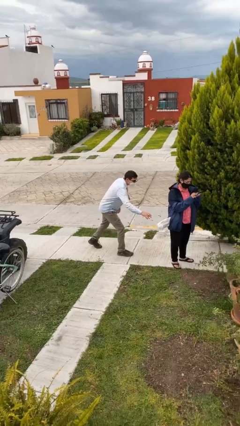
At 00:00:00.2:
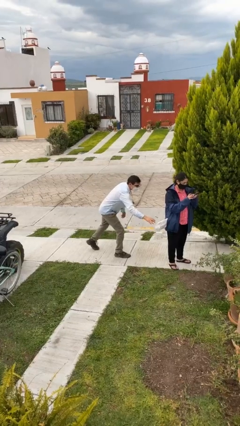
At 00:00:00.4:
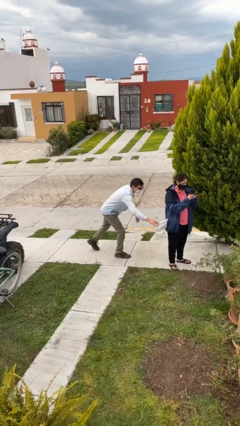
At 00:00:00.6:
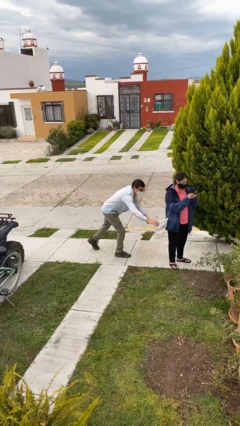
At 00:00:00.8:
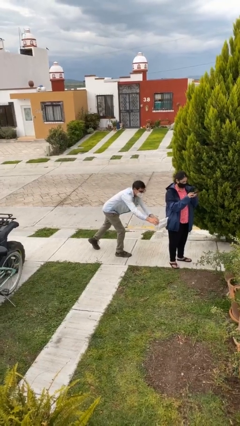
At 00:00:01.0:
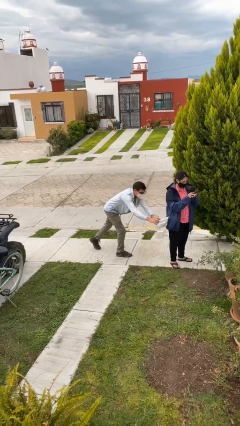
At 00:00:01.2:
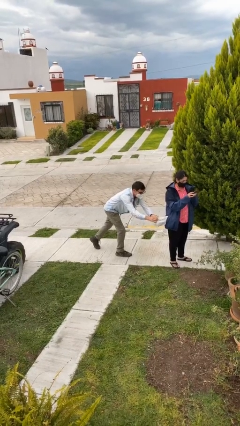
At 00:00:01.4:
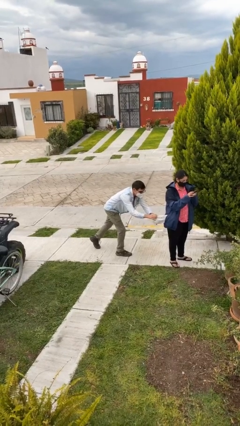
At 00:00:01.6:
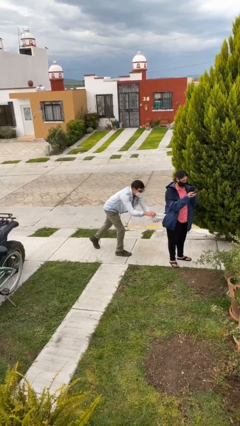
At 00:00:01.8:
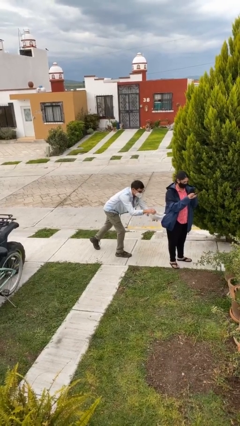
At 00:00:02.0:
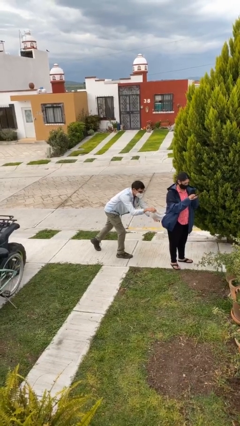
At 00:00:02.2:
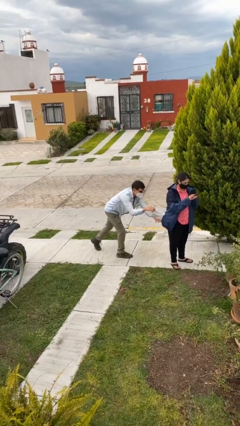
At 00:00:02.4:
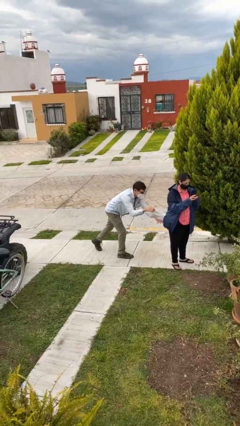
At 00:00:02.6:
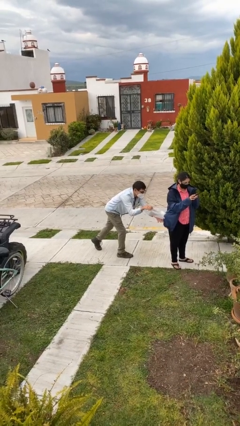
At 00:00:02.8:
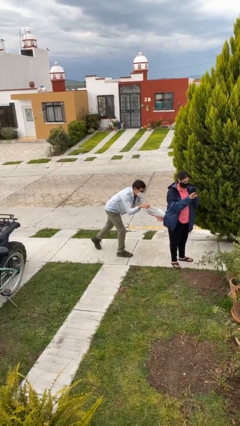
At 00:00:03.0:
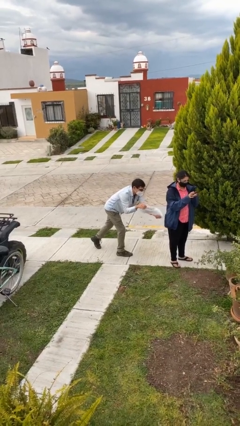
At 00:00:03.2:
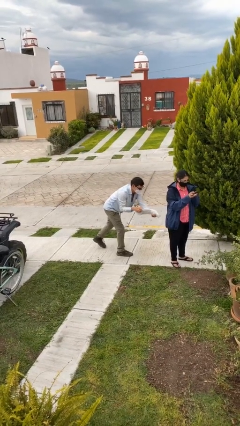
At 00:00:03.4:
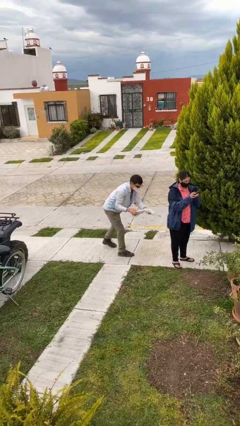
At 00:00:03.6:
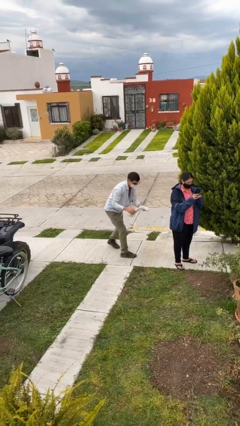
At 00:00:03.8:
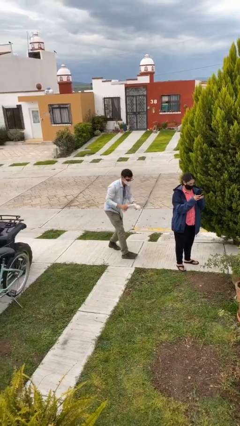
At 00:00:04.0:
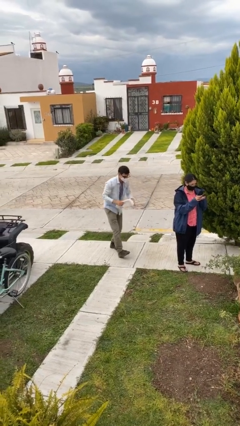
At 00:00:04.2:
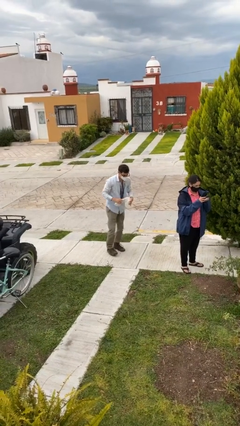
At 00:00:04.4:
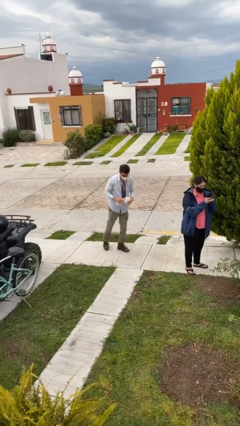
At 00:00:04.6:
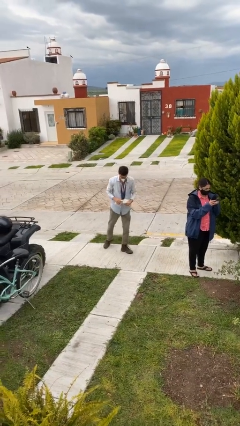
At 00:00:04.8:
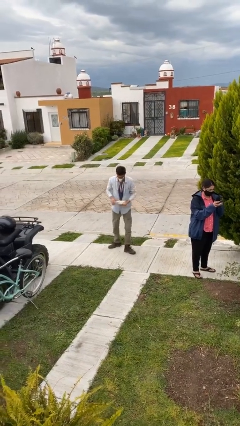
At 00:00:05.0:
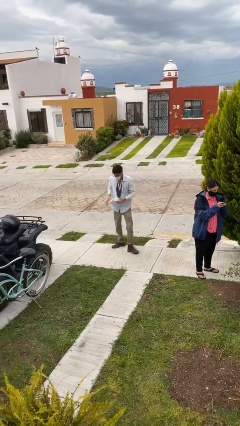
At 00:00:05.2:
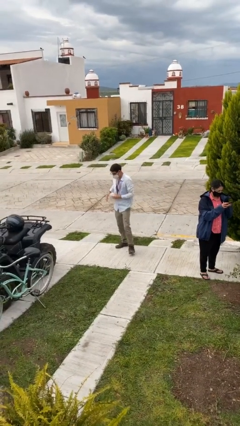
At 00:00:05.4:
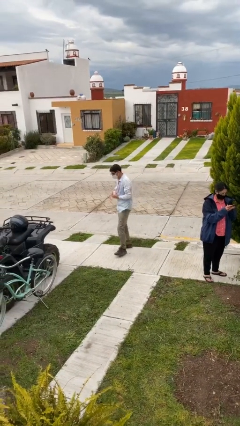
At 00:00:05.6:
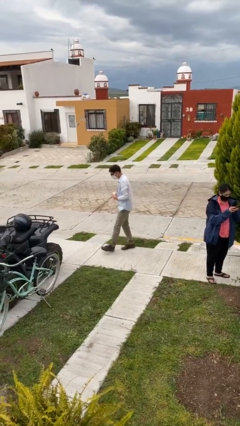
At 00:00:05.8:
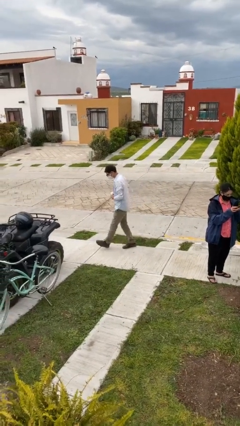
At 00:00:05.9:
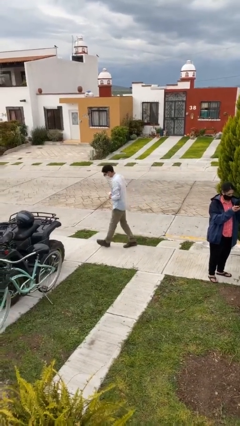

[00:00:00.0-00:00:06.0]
person steals object from person

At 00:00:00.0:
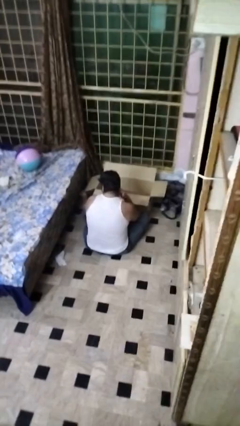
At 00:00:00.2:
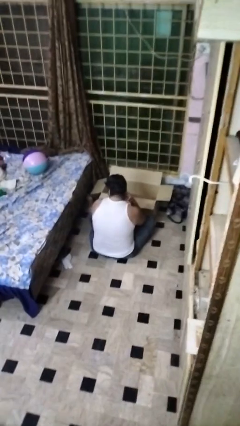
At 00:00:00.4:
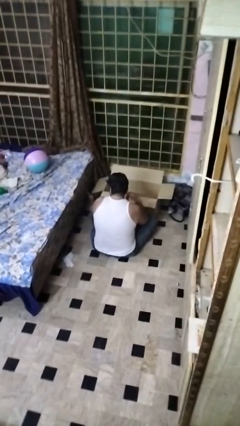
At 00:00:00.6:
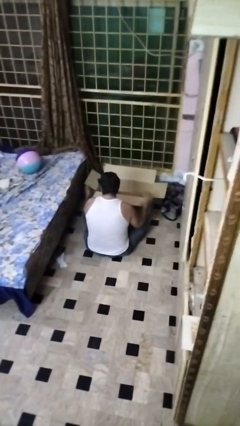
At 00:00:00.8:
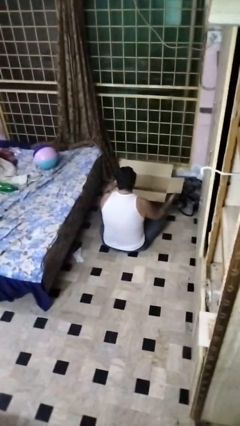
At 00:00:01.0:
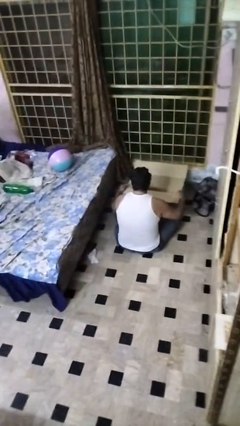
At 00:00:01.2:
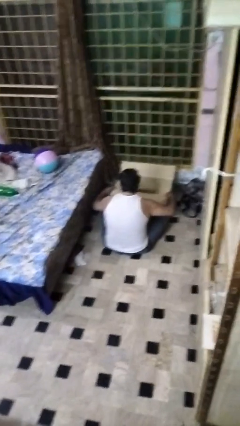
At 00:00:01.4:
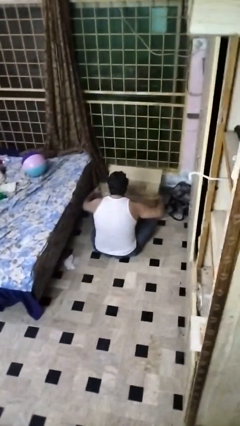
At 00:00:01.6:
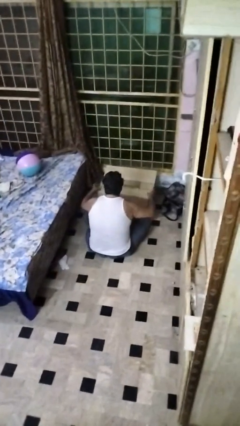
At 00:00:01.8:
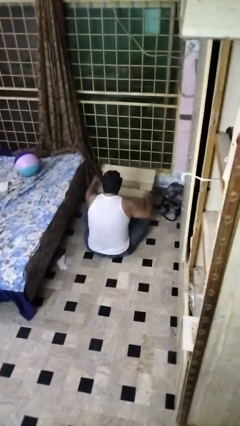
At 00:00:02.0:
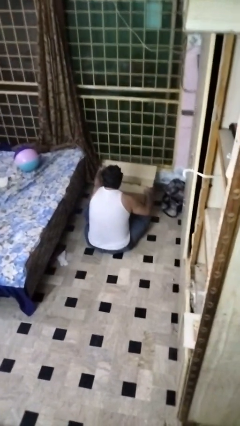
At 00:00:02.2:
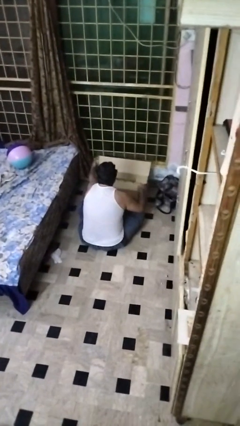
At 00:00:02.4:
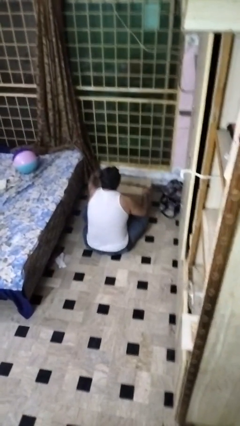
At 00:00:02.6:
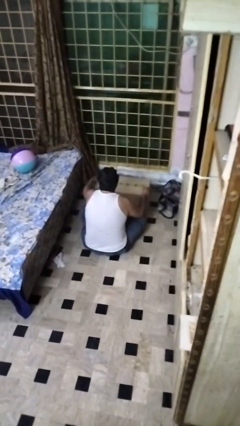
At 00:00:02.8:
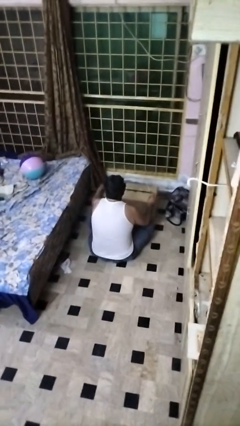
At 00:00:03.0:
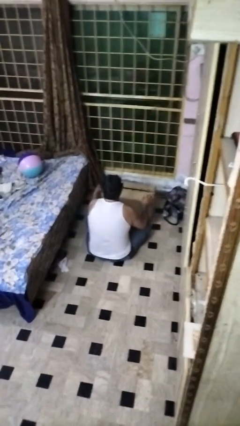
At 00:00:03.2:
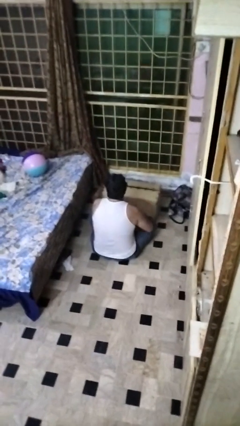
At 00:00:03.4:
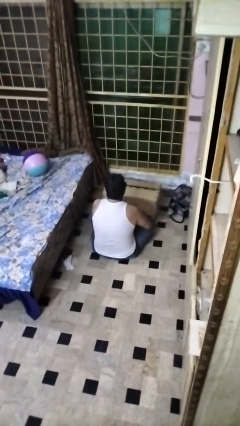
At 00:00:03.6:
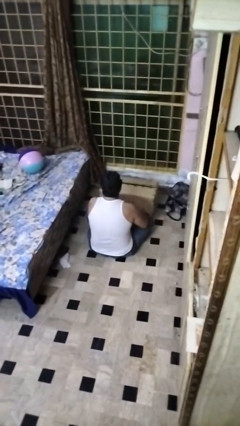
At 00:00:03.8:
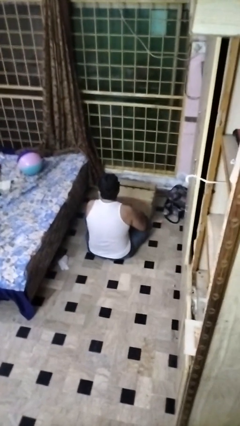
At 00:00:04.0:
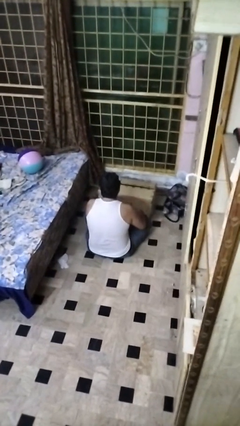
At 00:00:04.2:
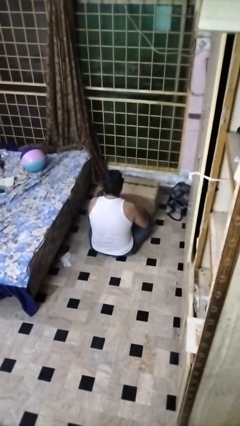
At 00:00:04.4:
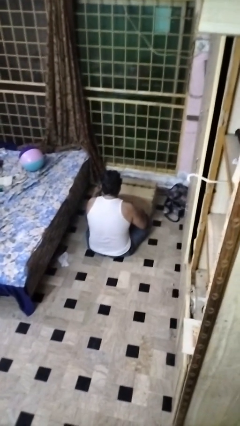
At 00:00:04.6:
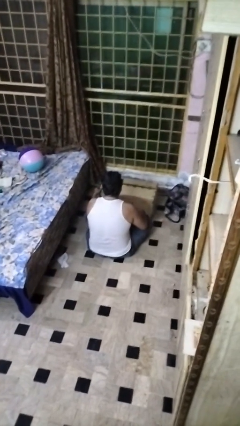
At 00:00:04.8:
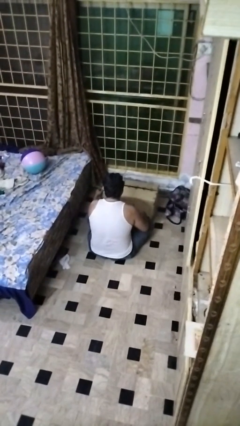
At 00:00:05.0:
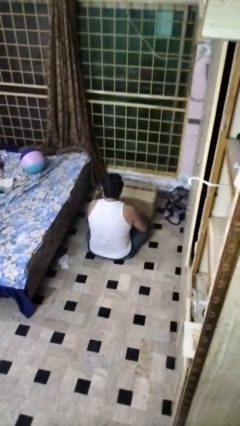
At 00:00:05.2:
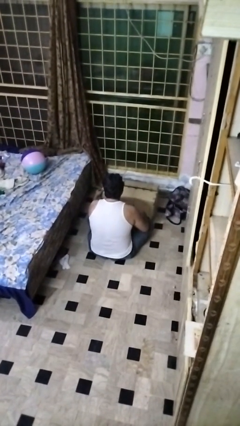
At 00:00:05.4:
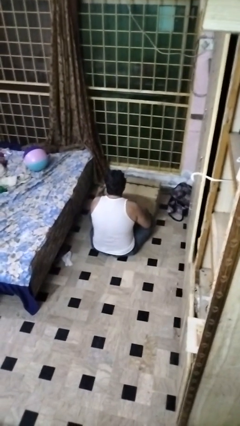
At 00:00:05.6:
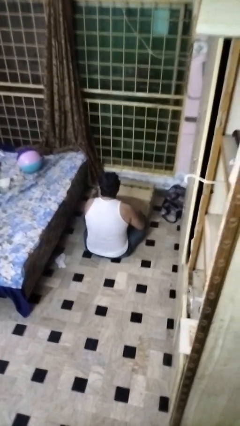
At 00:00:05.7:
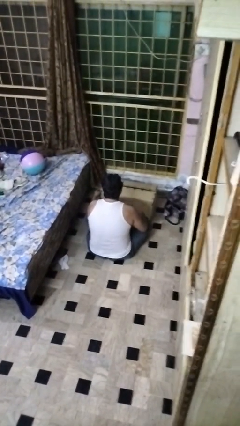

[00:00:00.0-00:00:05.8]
person closes box

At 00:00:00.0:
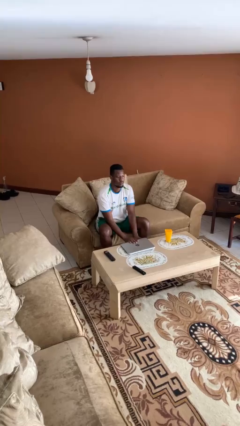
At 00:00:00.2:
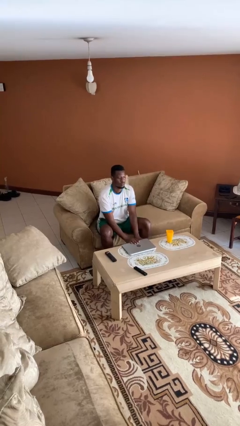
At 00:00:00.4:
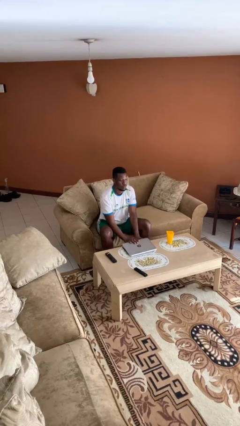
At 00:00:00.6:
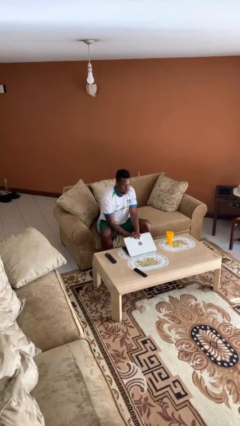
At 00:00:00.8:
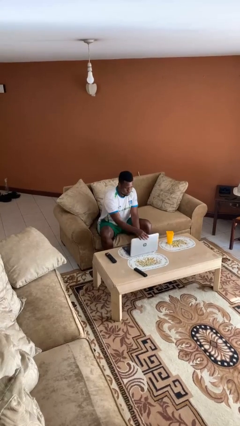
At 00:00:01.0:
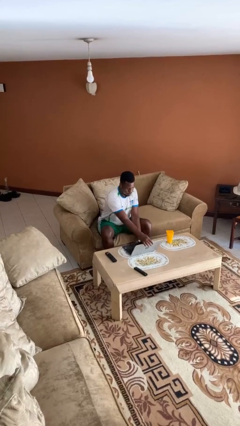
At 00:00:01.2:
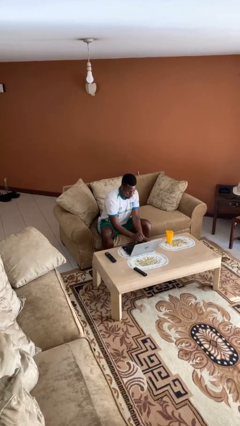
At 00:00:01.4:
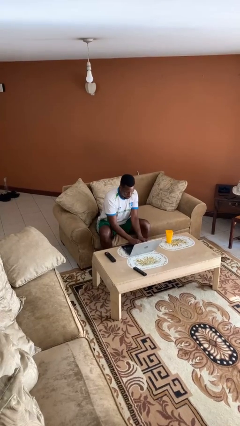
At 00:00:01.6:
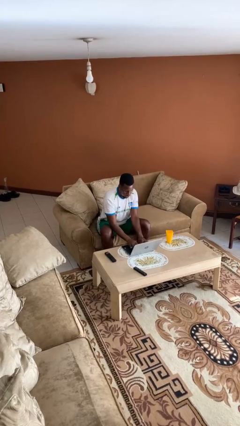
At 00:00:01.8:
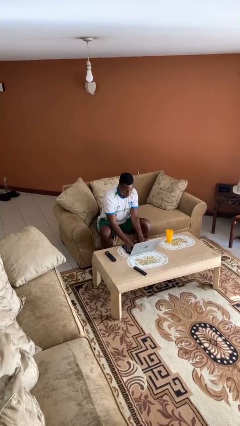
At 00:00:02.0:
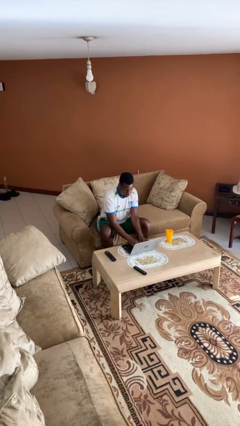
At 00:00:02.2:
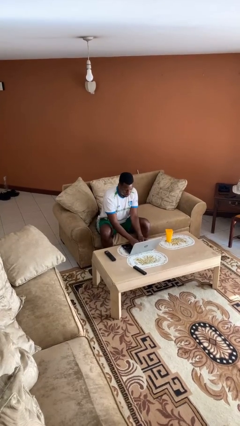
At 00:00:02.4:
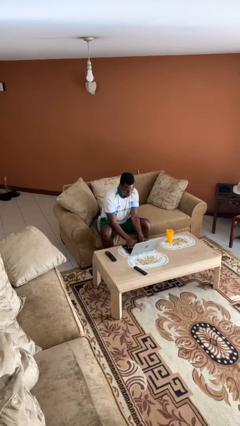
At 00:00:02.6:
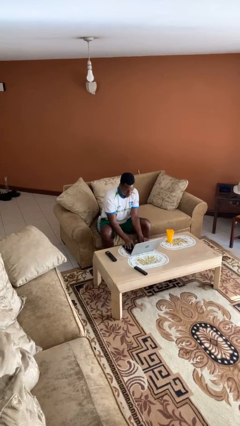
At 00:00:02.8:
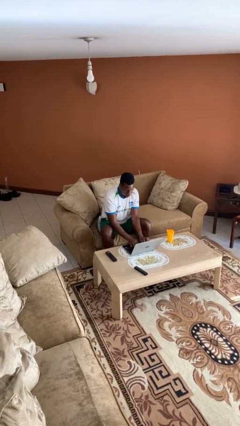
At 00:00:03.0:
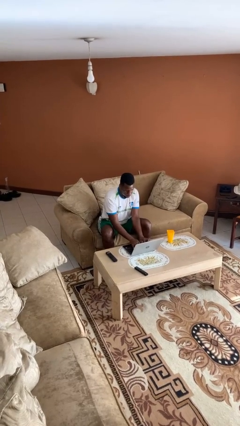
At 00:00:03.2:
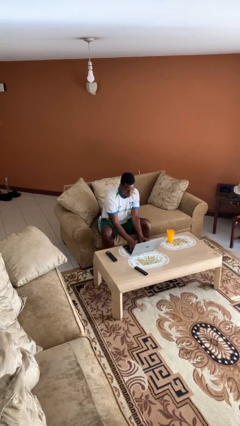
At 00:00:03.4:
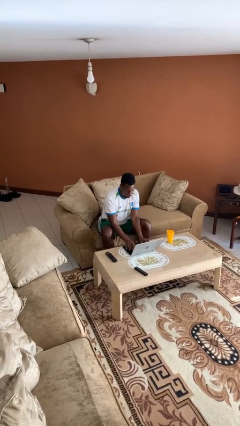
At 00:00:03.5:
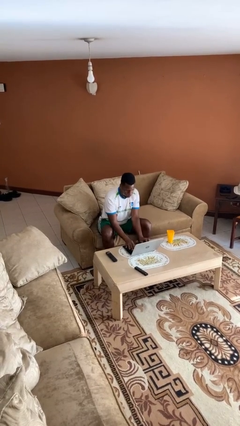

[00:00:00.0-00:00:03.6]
person interacts with laptop

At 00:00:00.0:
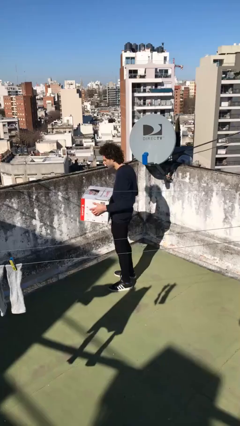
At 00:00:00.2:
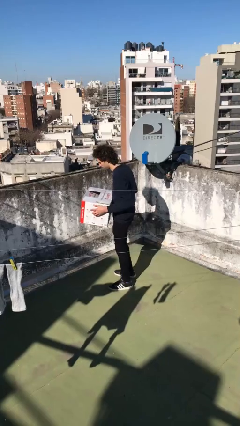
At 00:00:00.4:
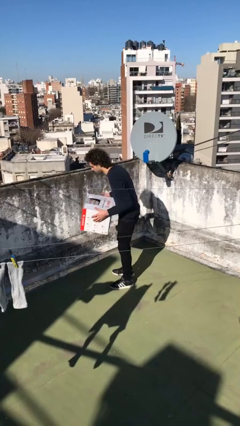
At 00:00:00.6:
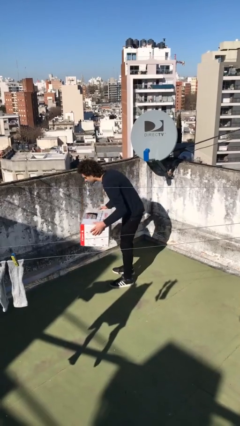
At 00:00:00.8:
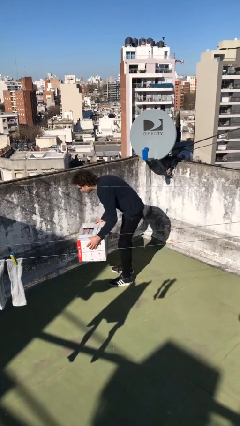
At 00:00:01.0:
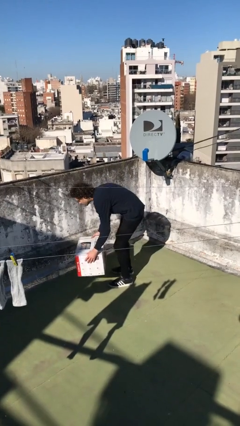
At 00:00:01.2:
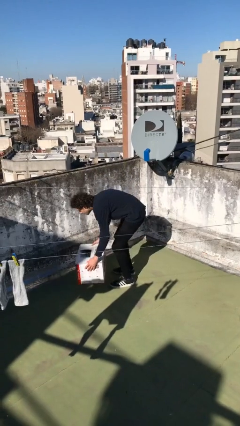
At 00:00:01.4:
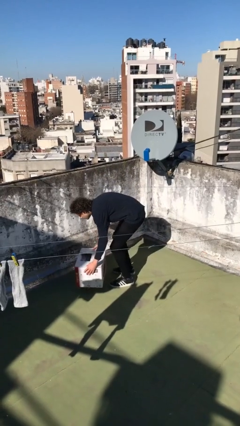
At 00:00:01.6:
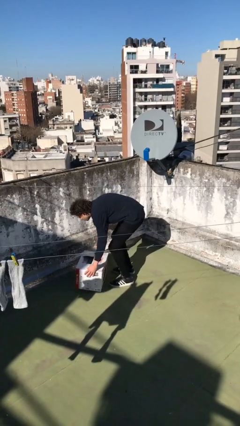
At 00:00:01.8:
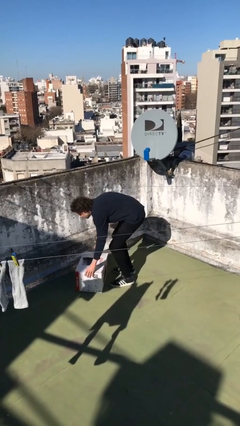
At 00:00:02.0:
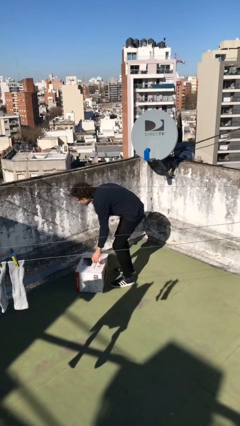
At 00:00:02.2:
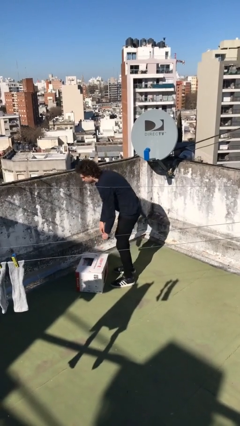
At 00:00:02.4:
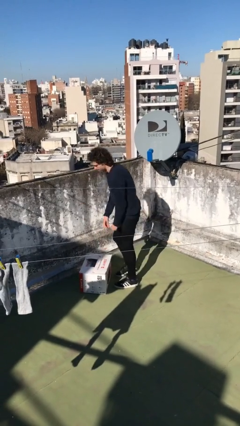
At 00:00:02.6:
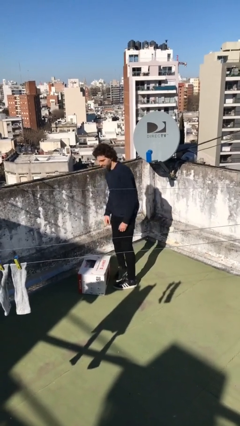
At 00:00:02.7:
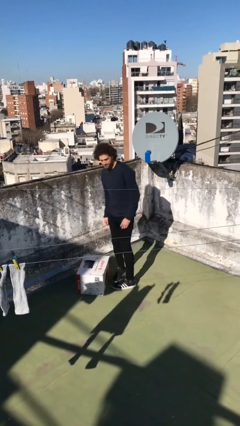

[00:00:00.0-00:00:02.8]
person puts down object on floor
